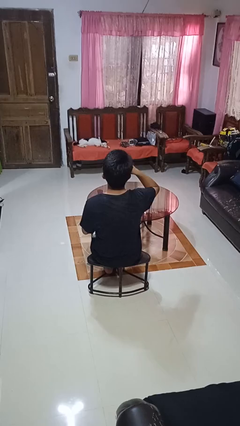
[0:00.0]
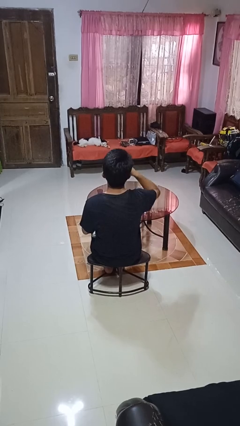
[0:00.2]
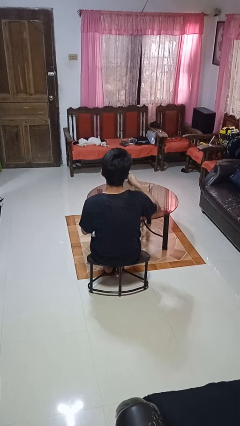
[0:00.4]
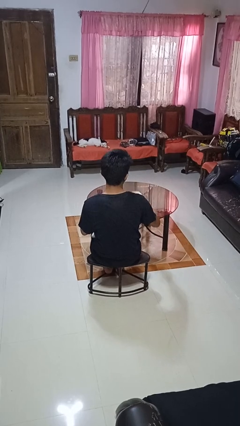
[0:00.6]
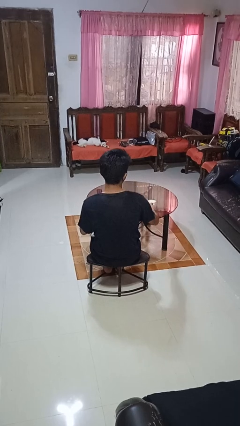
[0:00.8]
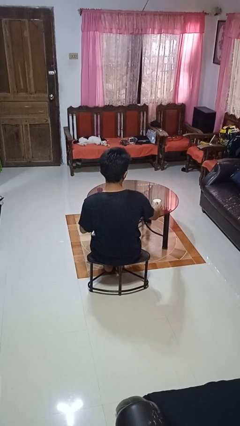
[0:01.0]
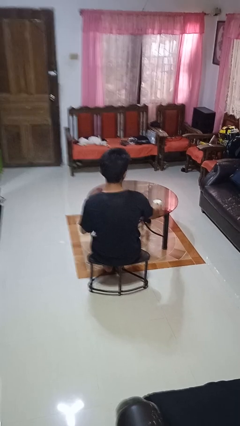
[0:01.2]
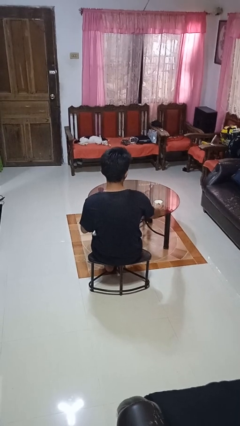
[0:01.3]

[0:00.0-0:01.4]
person puts down object on table

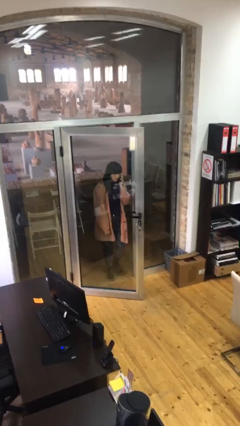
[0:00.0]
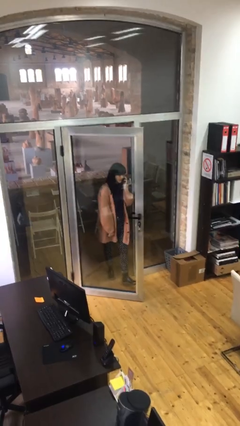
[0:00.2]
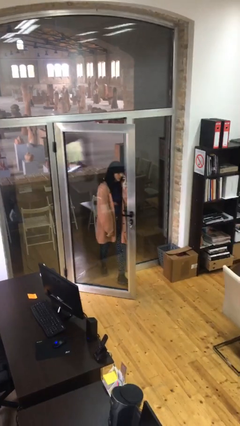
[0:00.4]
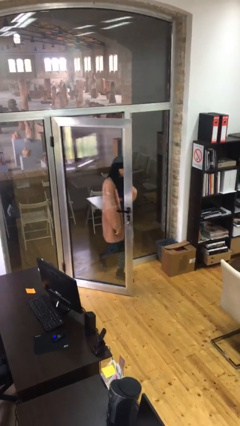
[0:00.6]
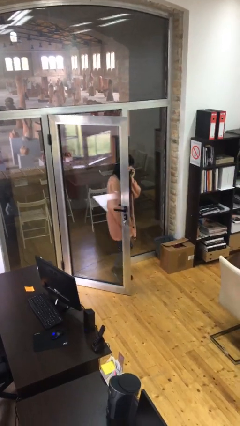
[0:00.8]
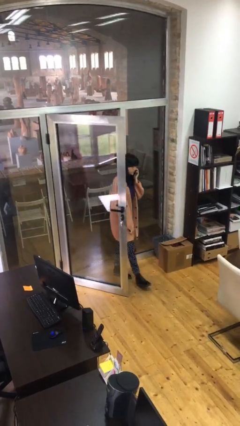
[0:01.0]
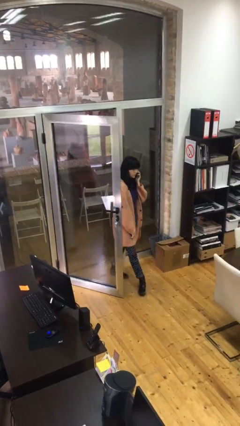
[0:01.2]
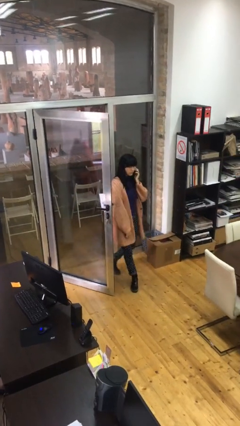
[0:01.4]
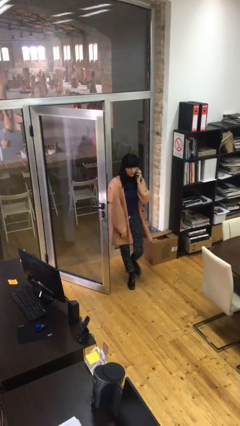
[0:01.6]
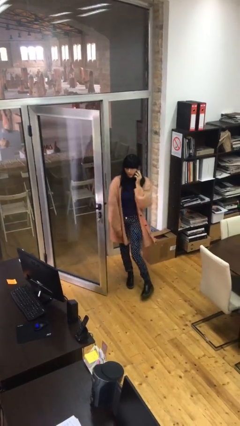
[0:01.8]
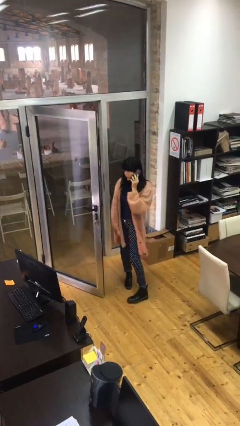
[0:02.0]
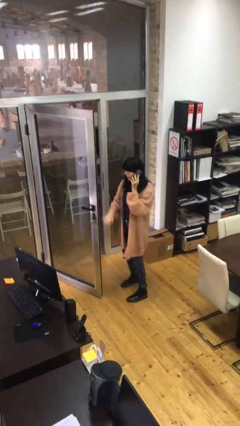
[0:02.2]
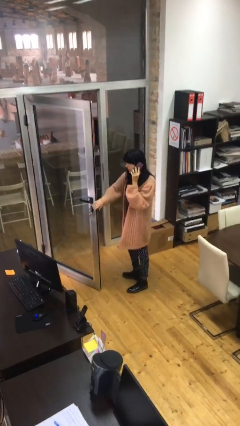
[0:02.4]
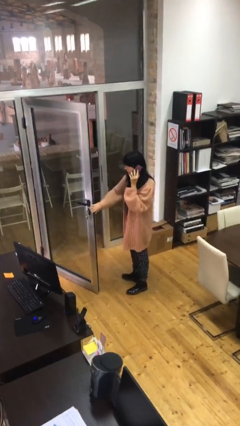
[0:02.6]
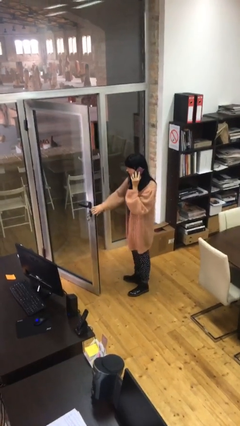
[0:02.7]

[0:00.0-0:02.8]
person enters scene through structure

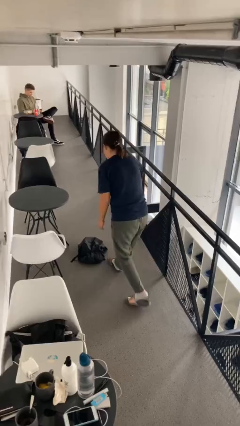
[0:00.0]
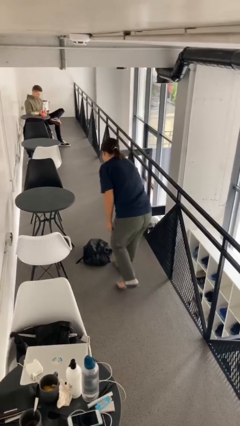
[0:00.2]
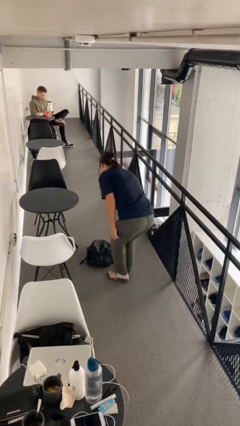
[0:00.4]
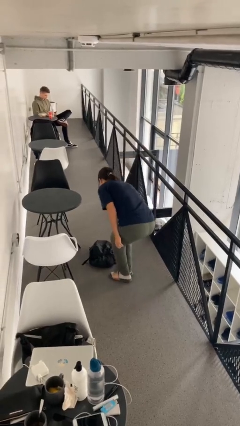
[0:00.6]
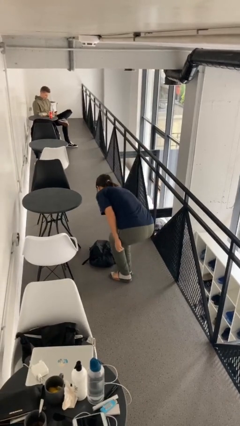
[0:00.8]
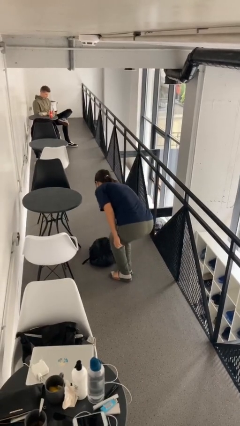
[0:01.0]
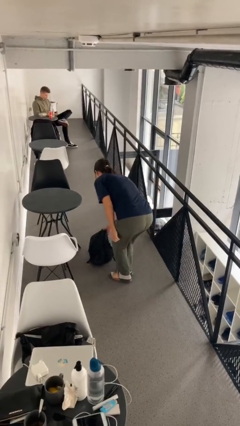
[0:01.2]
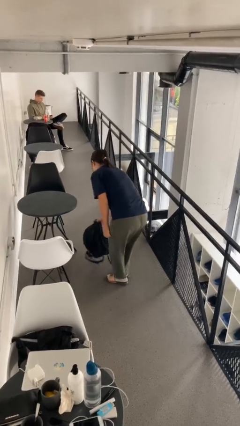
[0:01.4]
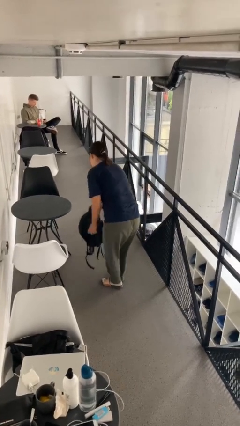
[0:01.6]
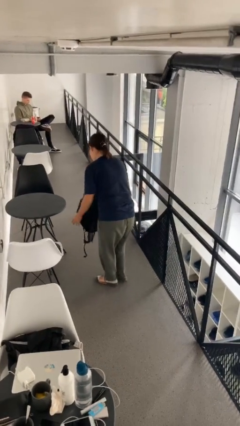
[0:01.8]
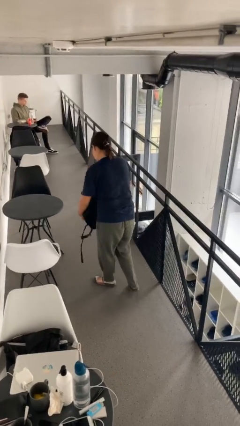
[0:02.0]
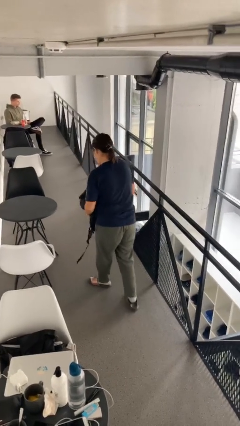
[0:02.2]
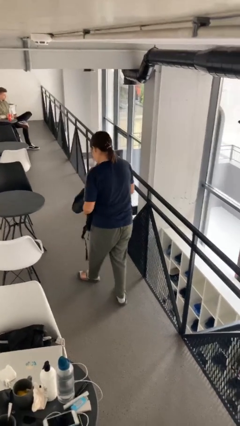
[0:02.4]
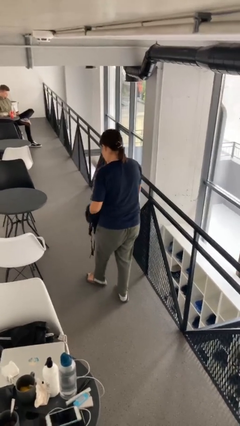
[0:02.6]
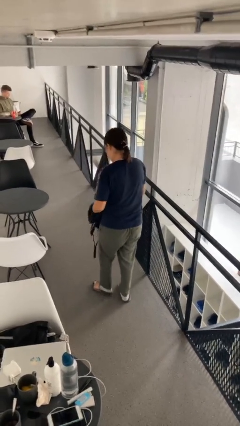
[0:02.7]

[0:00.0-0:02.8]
person picks up object from floor

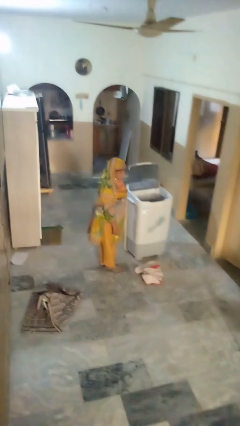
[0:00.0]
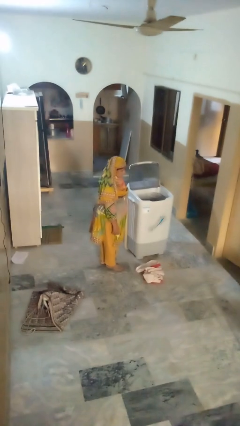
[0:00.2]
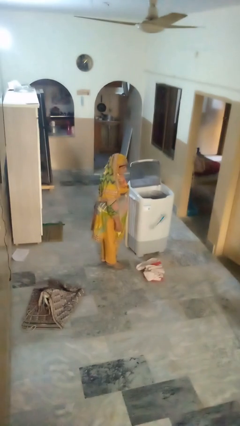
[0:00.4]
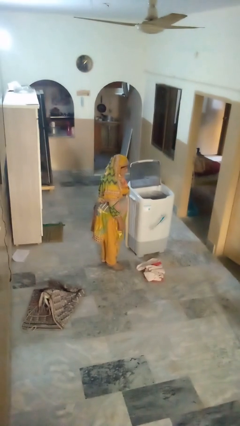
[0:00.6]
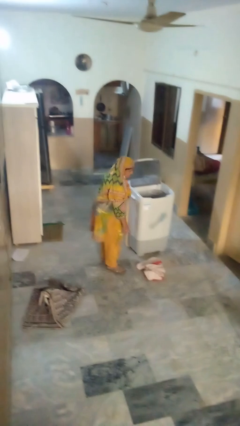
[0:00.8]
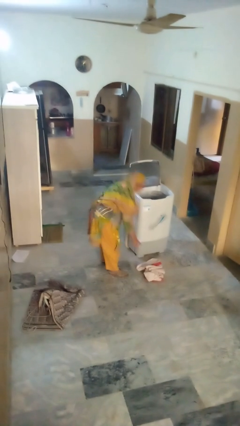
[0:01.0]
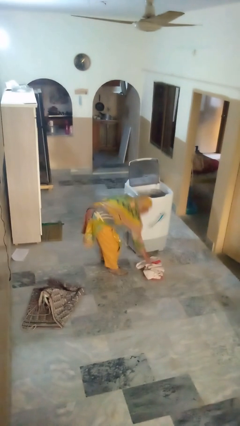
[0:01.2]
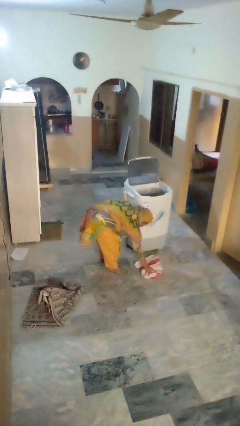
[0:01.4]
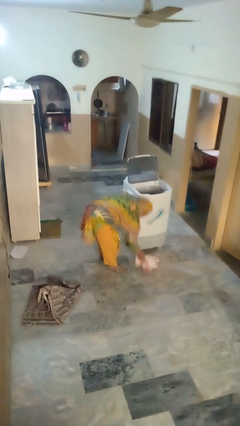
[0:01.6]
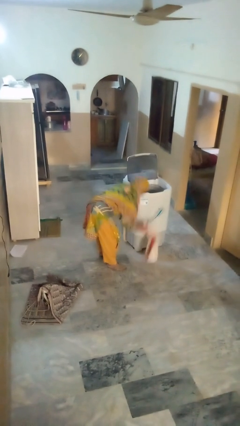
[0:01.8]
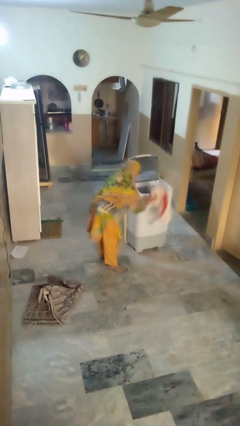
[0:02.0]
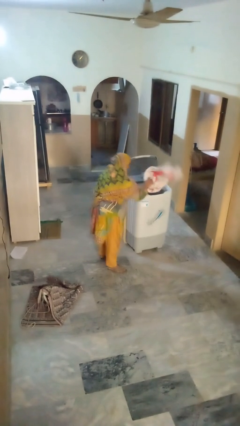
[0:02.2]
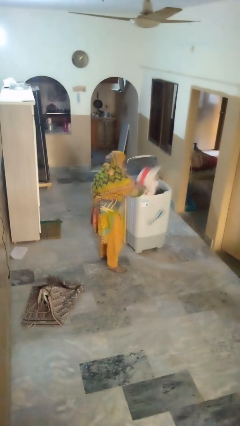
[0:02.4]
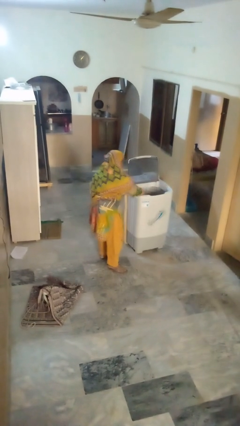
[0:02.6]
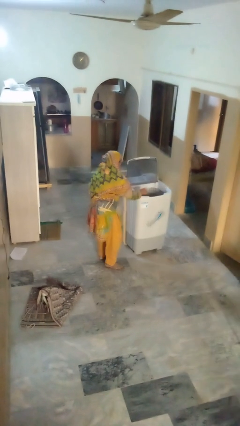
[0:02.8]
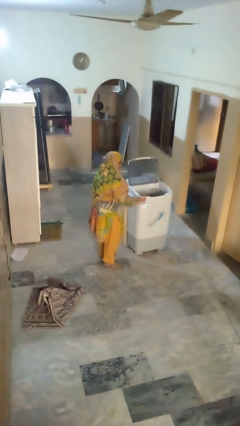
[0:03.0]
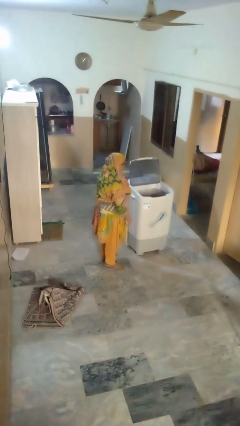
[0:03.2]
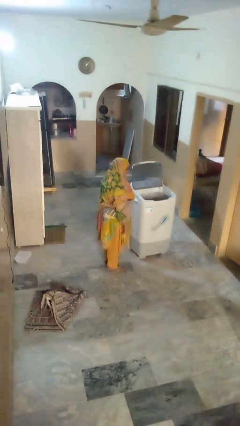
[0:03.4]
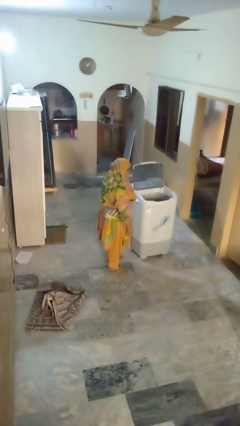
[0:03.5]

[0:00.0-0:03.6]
person loads clotheswasher

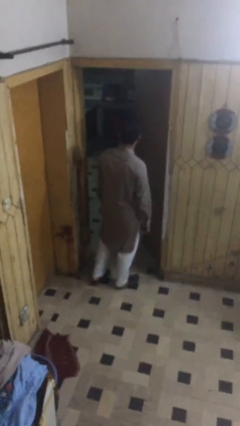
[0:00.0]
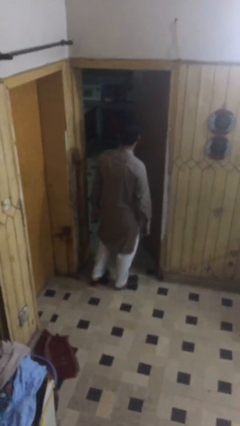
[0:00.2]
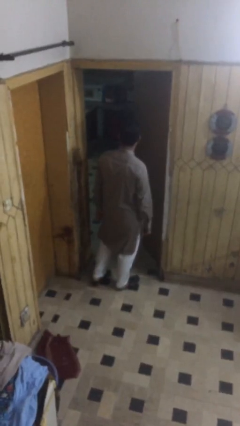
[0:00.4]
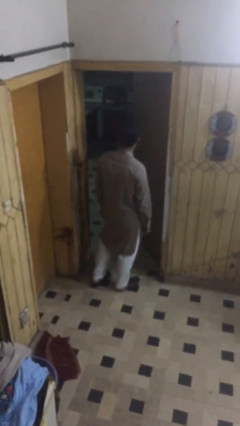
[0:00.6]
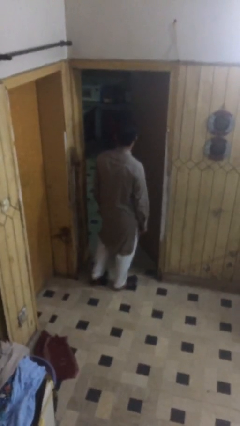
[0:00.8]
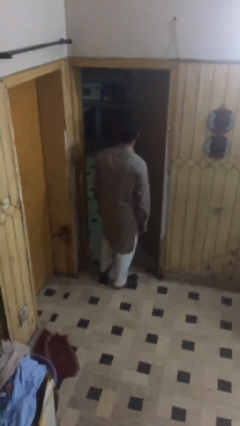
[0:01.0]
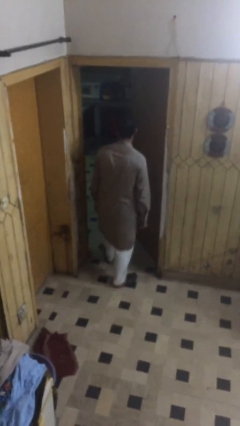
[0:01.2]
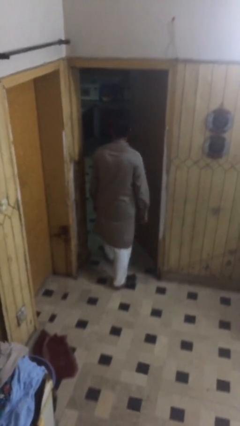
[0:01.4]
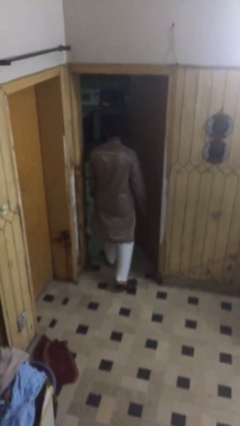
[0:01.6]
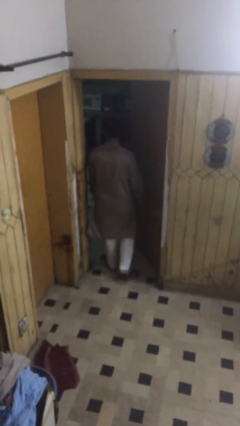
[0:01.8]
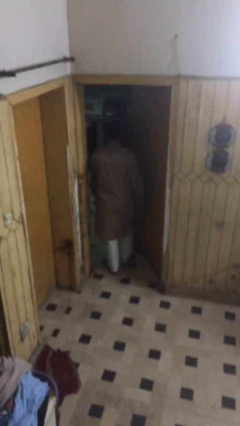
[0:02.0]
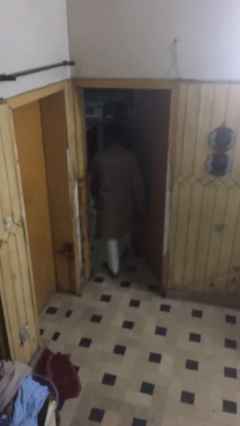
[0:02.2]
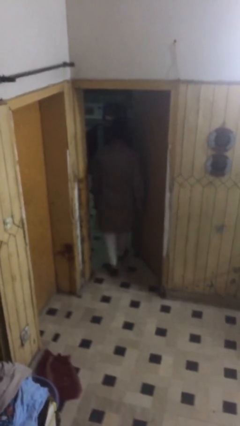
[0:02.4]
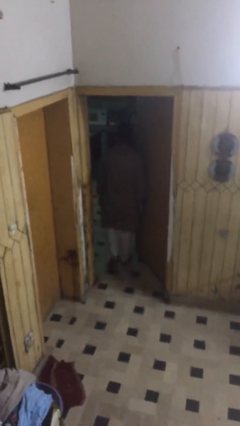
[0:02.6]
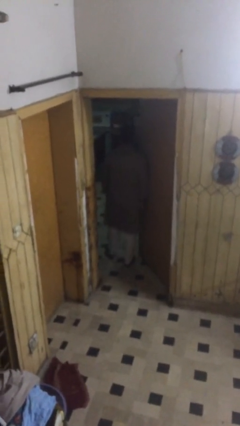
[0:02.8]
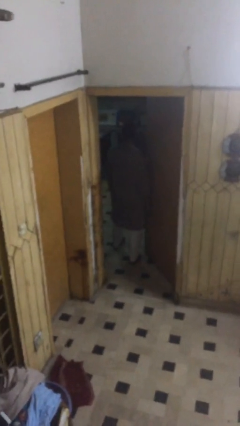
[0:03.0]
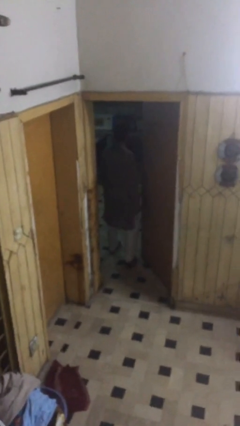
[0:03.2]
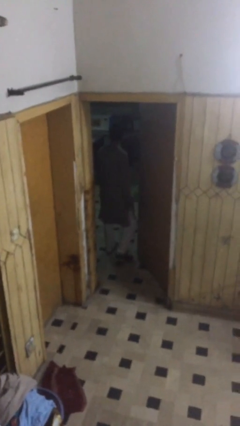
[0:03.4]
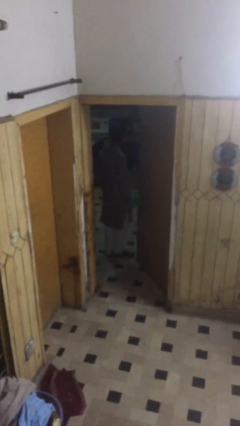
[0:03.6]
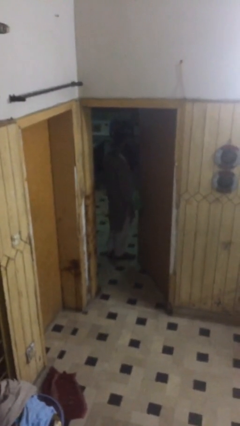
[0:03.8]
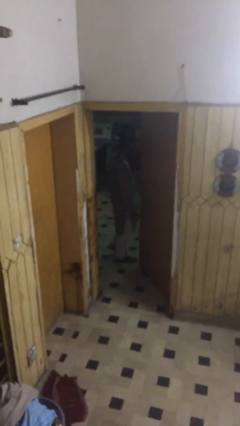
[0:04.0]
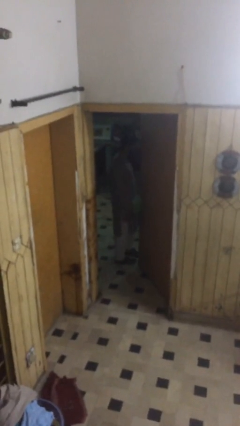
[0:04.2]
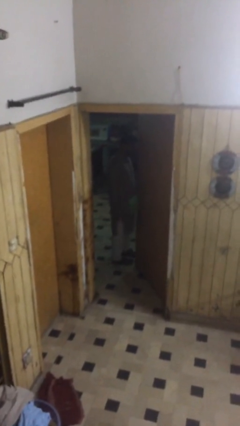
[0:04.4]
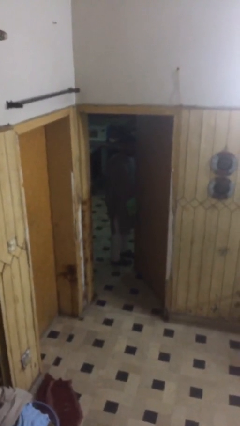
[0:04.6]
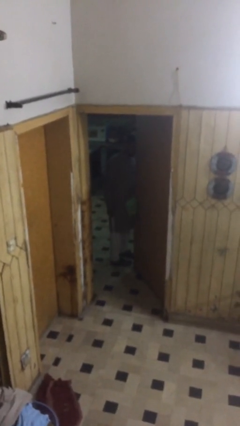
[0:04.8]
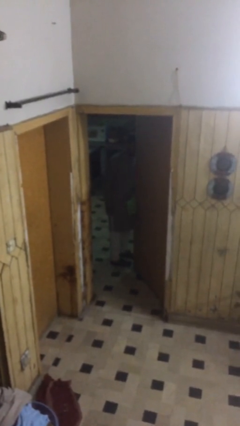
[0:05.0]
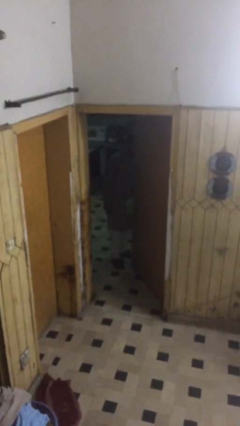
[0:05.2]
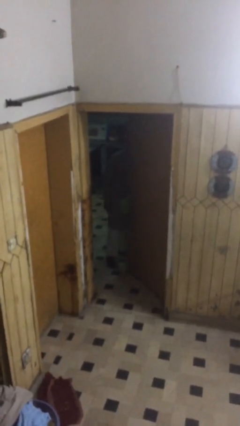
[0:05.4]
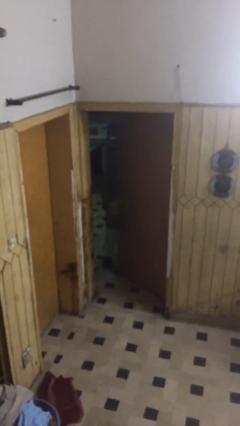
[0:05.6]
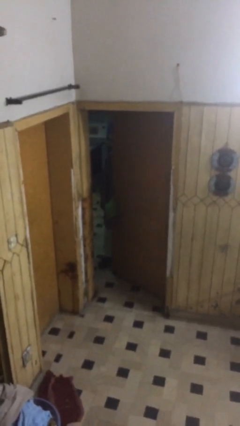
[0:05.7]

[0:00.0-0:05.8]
person exits scene through structure

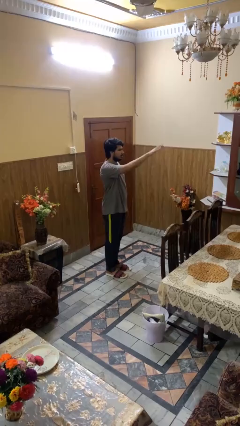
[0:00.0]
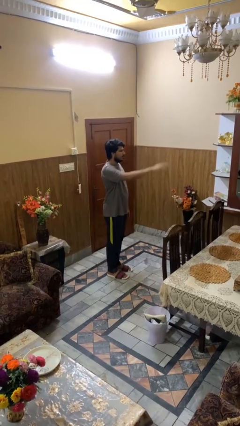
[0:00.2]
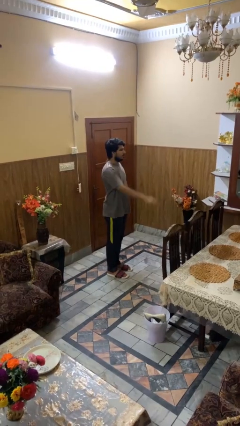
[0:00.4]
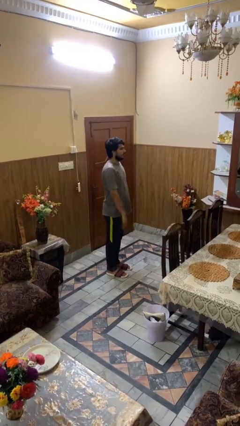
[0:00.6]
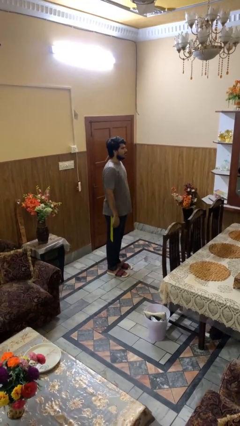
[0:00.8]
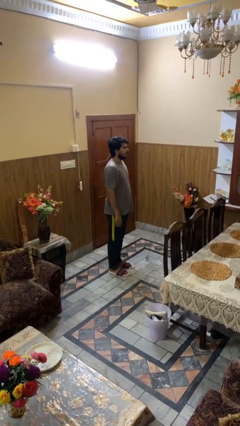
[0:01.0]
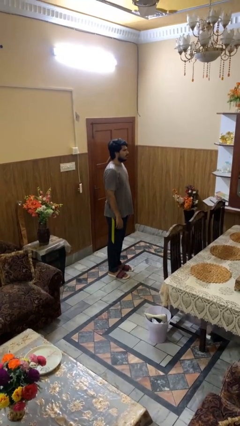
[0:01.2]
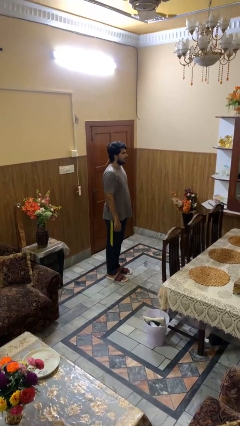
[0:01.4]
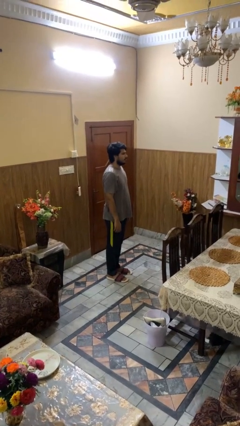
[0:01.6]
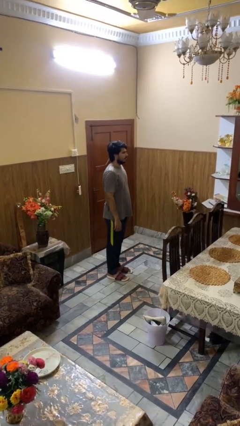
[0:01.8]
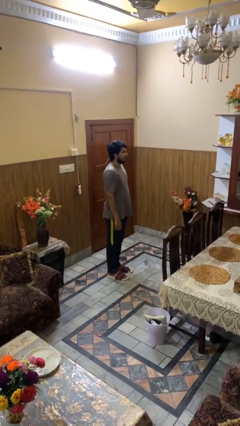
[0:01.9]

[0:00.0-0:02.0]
person gestures swipe down
